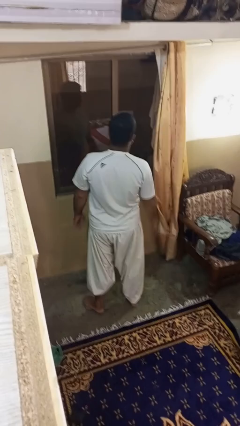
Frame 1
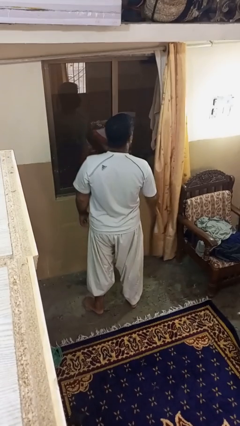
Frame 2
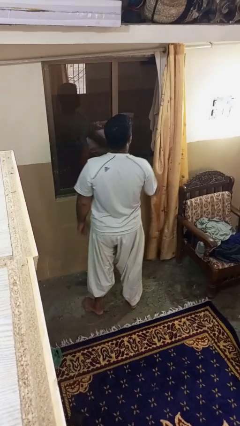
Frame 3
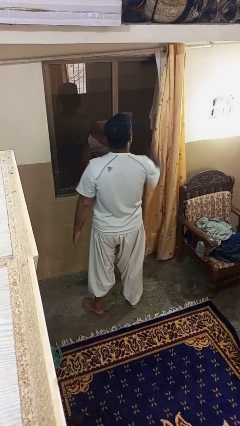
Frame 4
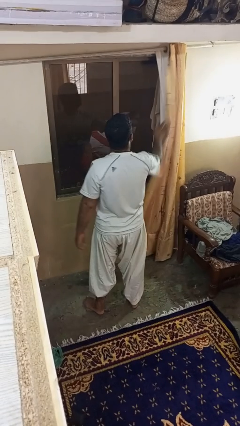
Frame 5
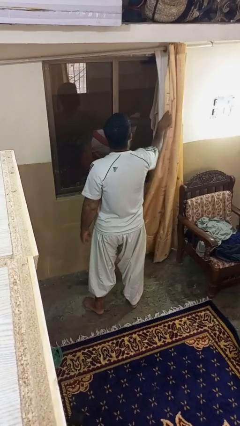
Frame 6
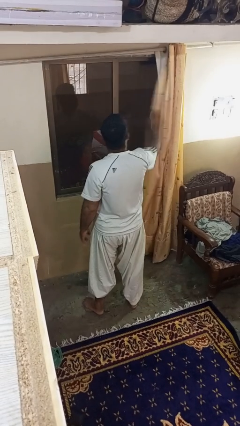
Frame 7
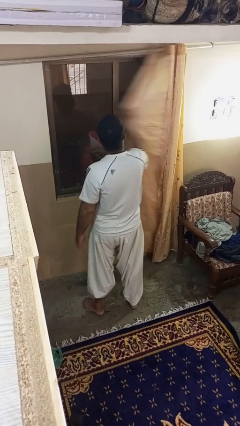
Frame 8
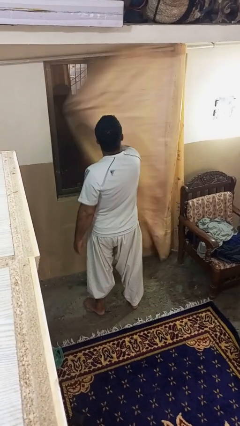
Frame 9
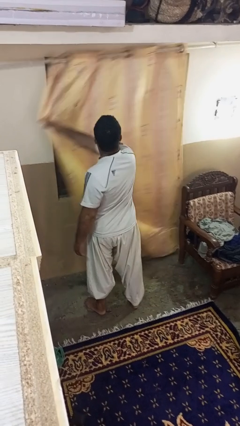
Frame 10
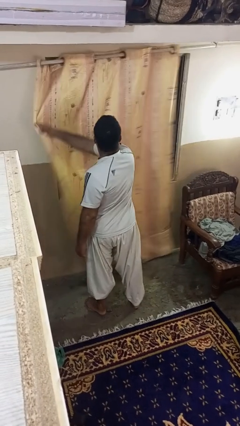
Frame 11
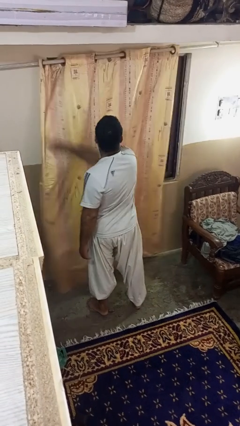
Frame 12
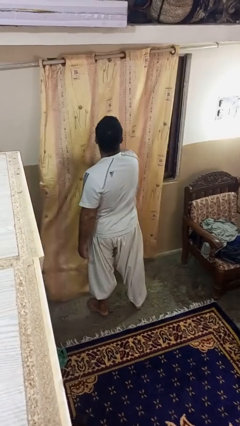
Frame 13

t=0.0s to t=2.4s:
person closes curtains

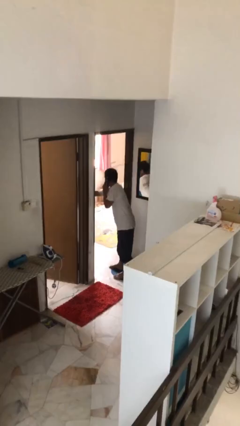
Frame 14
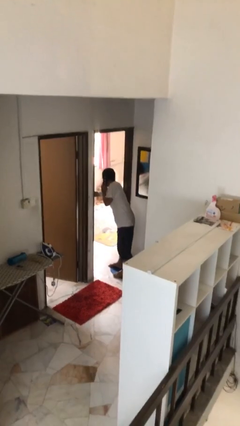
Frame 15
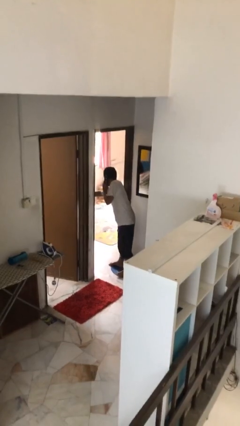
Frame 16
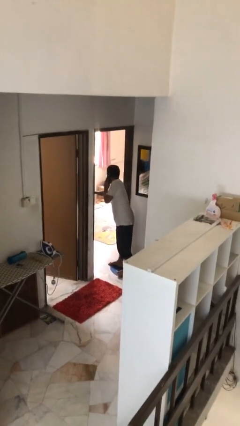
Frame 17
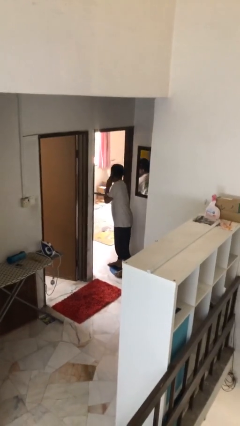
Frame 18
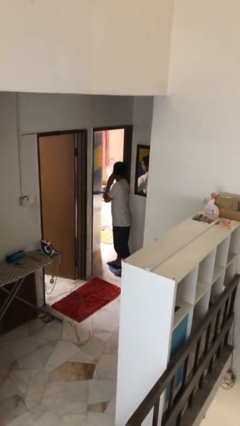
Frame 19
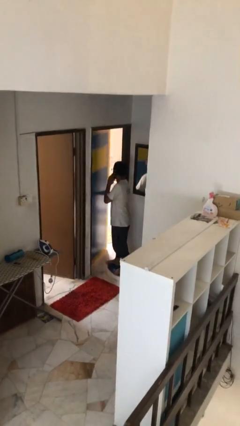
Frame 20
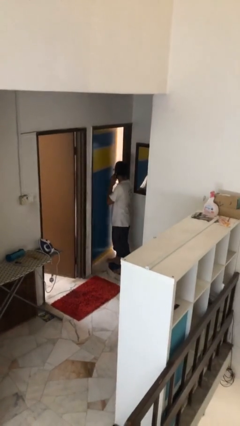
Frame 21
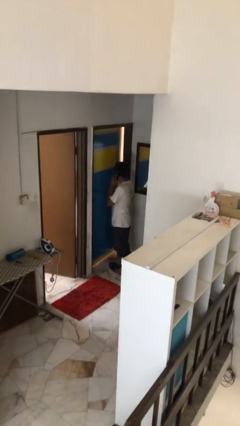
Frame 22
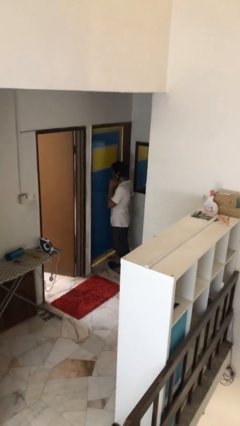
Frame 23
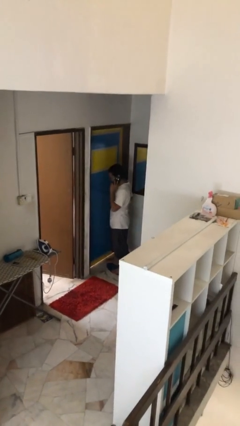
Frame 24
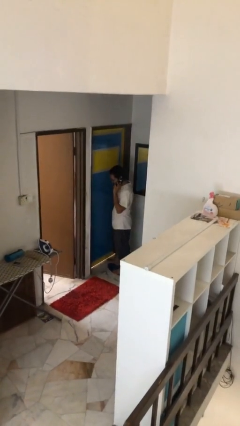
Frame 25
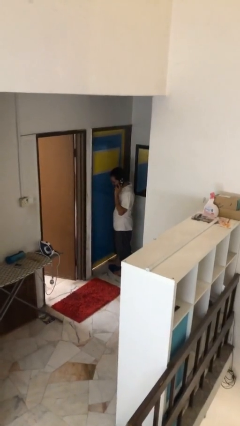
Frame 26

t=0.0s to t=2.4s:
person closes facility door

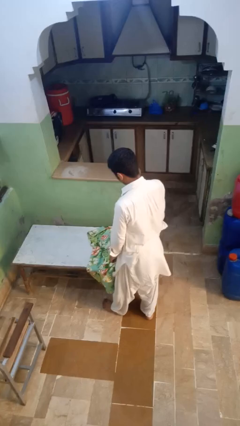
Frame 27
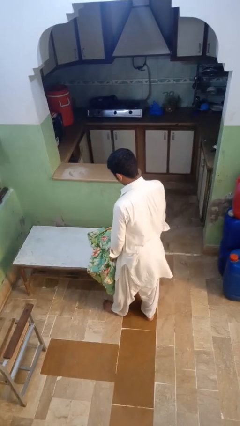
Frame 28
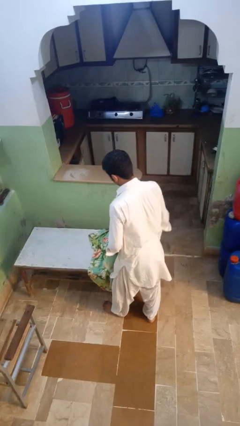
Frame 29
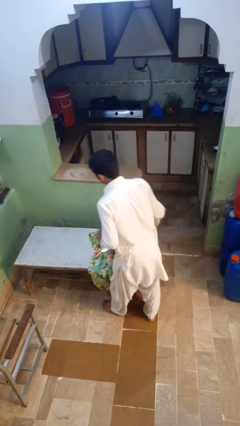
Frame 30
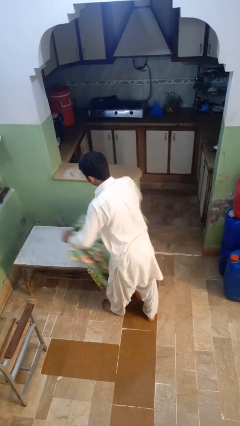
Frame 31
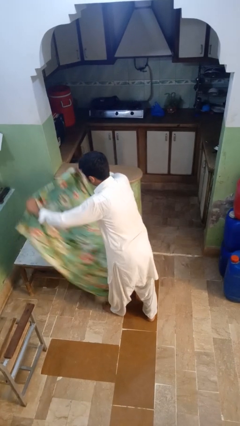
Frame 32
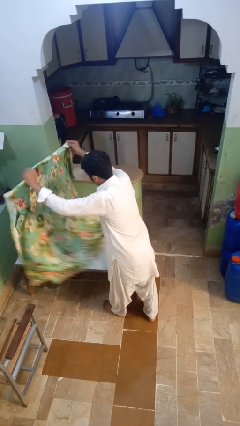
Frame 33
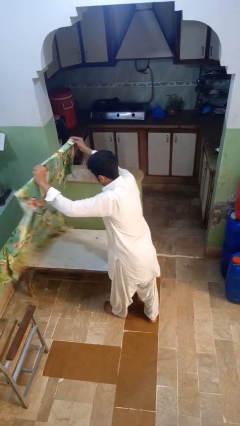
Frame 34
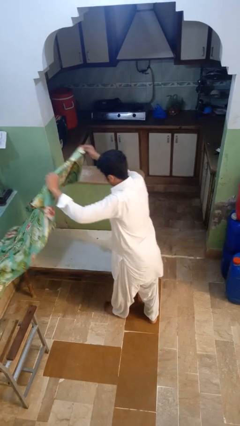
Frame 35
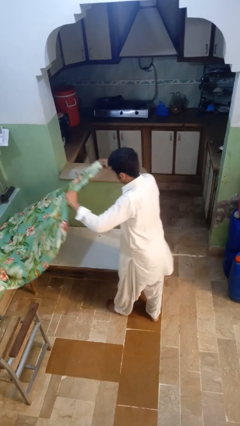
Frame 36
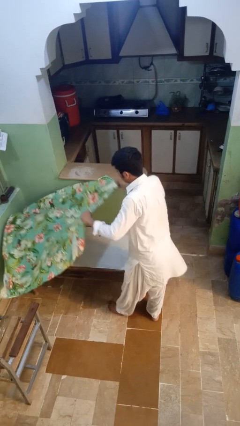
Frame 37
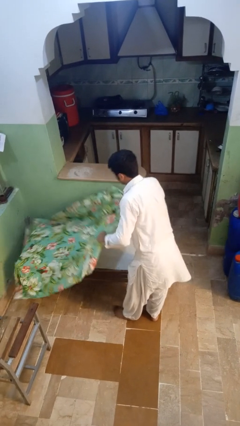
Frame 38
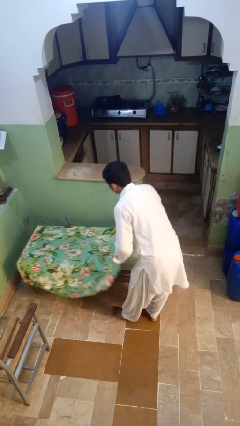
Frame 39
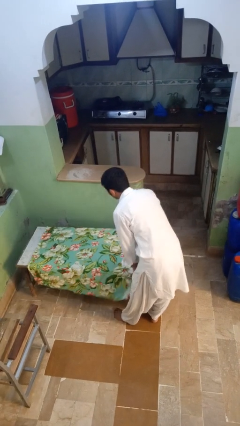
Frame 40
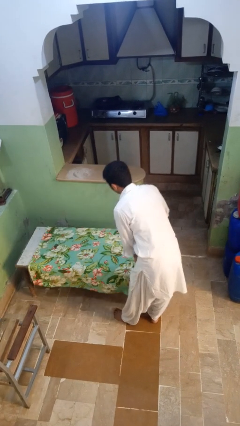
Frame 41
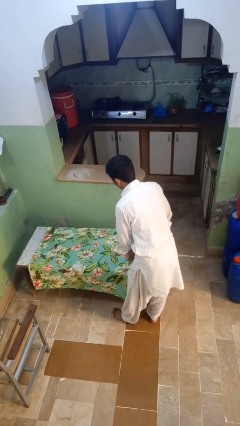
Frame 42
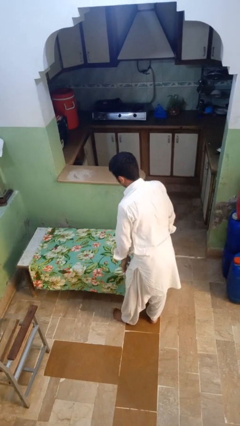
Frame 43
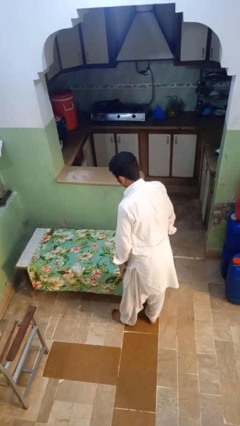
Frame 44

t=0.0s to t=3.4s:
person spreads tablecloth

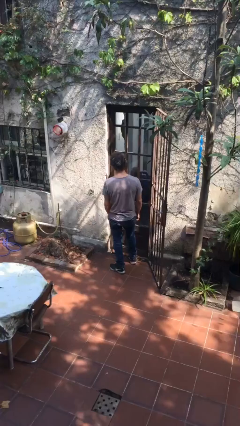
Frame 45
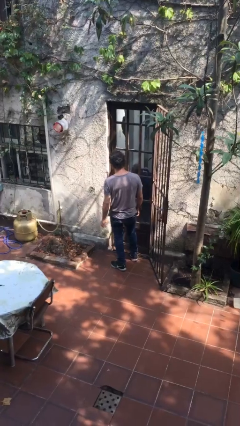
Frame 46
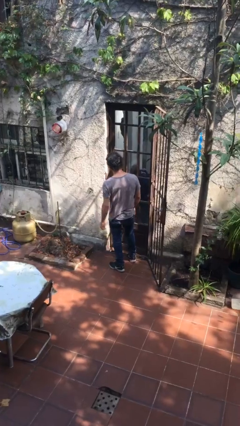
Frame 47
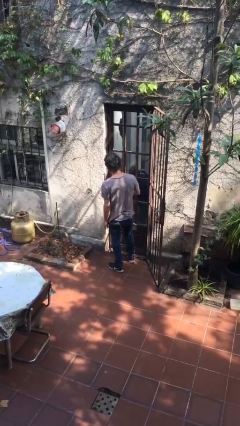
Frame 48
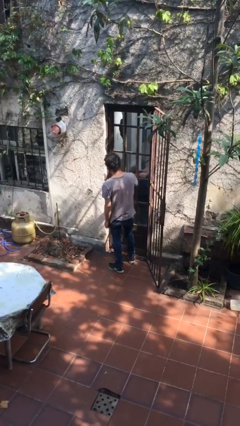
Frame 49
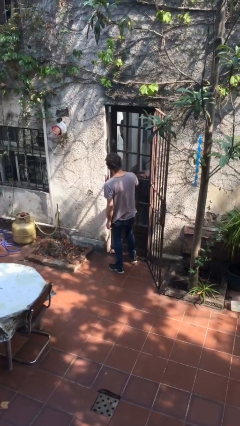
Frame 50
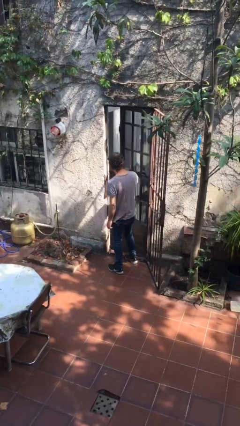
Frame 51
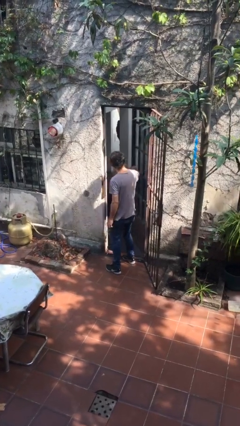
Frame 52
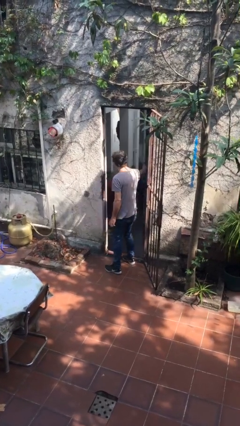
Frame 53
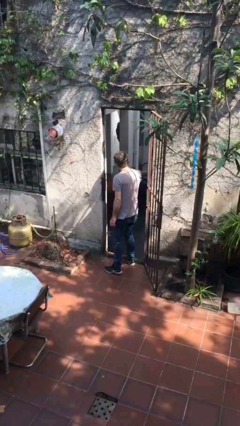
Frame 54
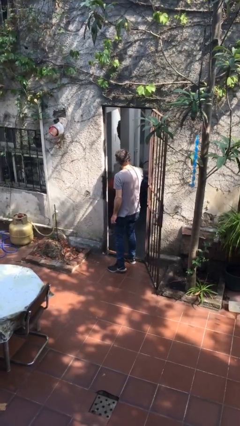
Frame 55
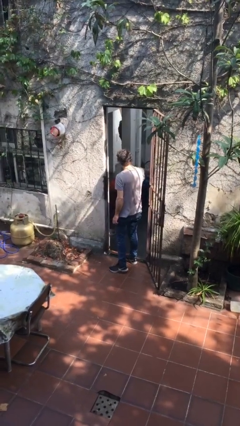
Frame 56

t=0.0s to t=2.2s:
person opens facility door

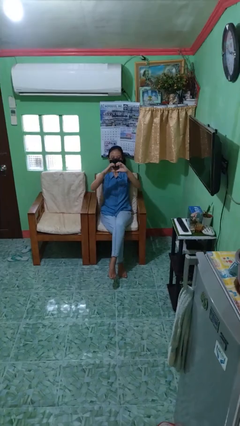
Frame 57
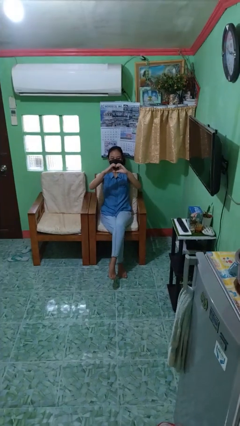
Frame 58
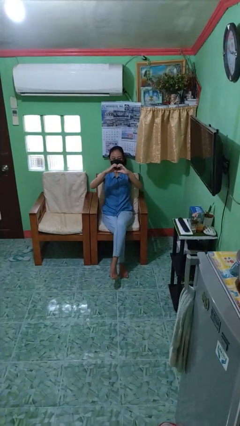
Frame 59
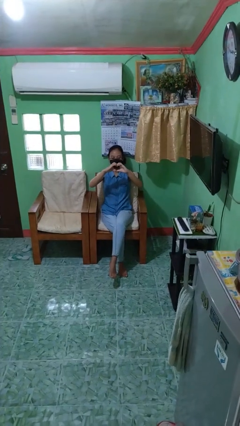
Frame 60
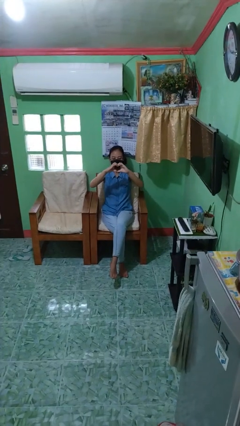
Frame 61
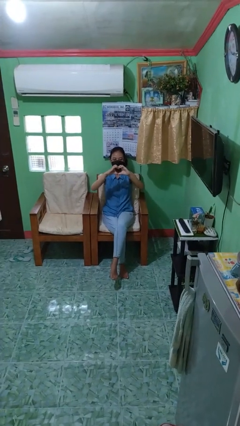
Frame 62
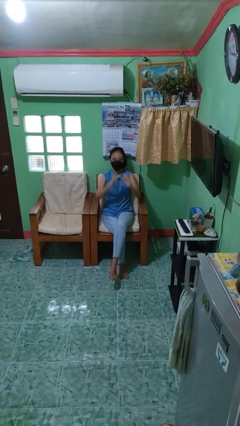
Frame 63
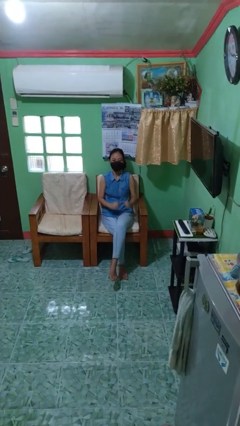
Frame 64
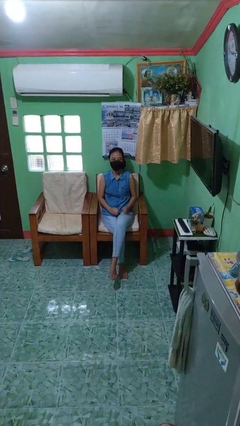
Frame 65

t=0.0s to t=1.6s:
person gestures heart

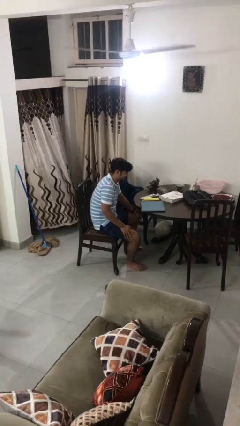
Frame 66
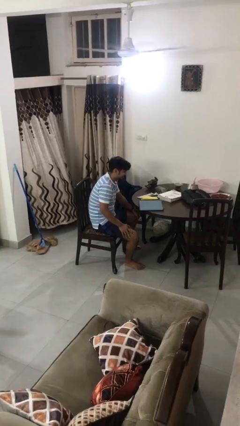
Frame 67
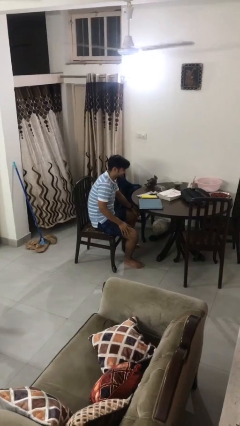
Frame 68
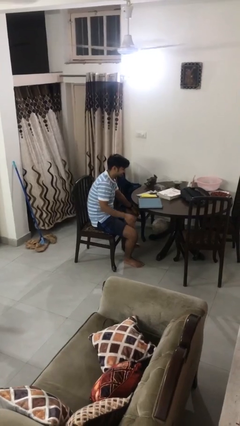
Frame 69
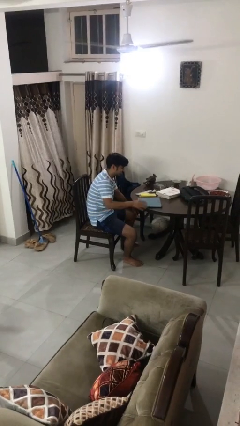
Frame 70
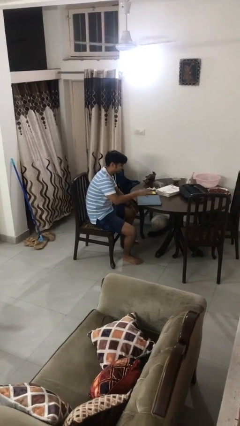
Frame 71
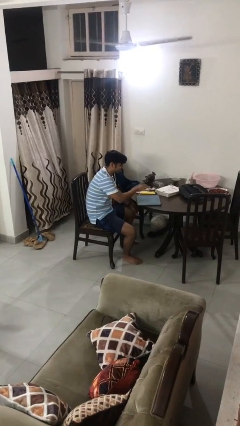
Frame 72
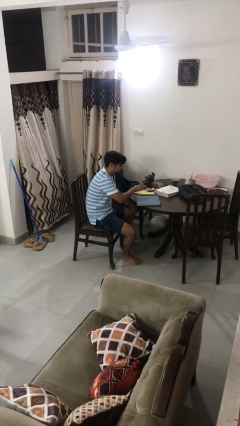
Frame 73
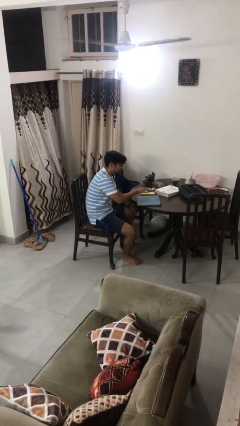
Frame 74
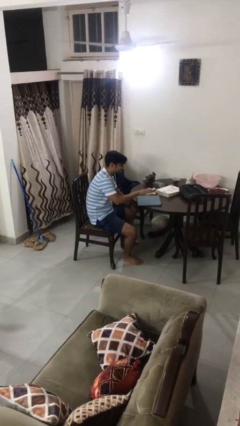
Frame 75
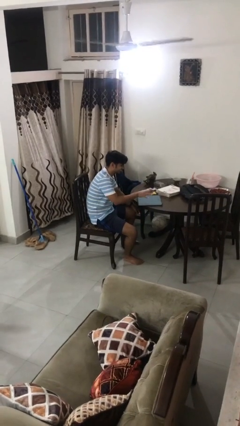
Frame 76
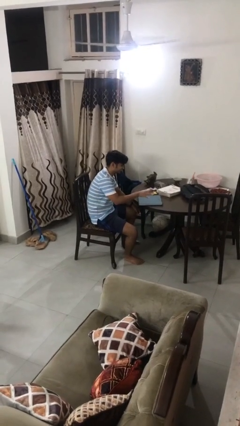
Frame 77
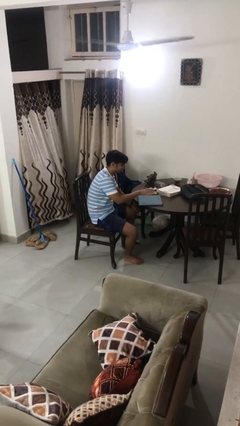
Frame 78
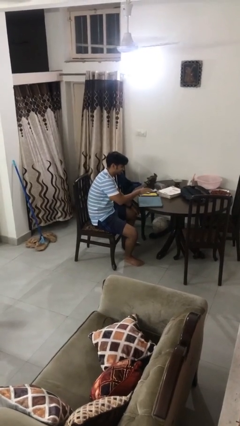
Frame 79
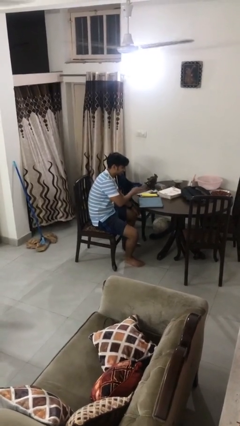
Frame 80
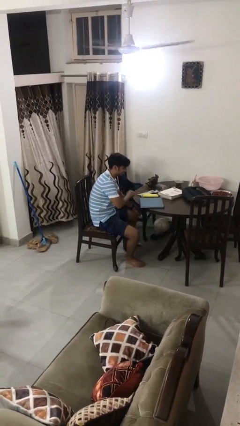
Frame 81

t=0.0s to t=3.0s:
person waves hand over object

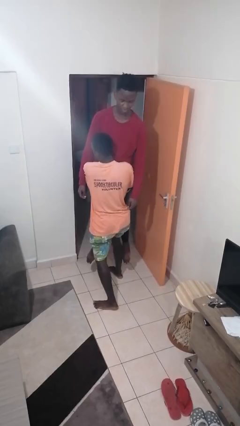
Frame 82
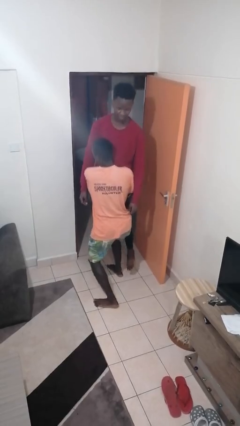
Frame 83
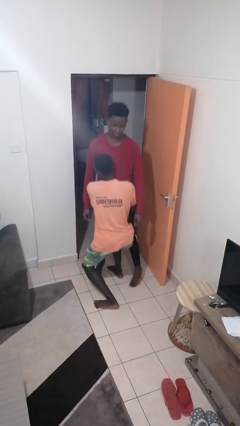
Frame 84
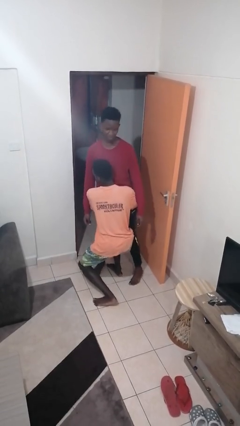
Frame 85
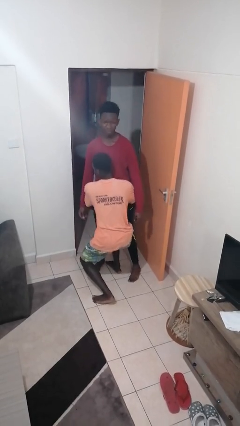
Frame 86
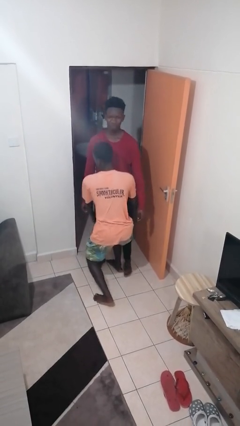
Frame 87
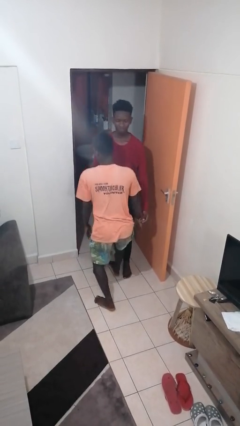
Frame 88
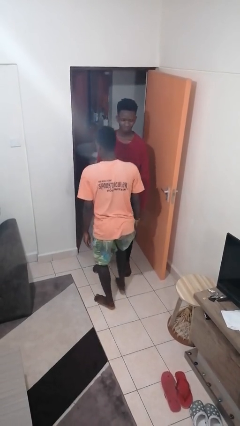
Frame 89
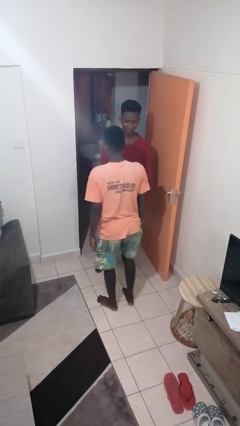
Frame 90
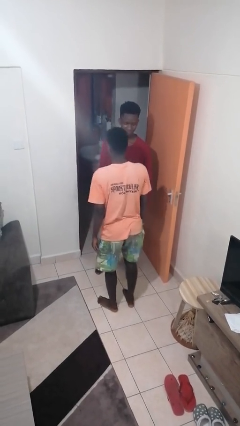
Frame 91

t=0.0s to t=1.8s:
person puts down person

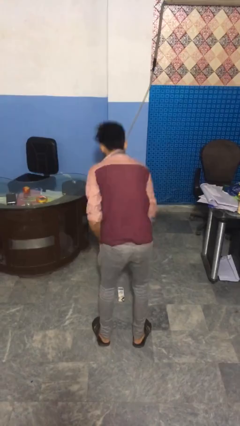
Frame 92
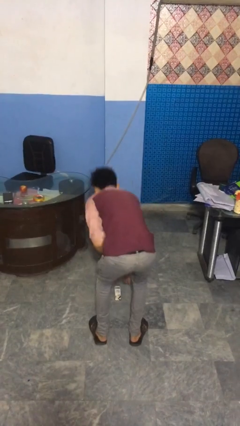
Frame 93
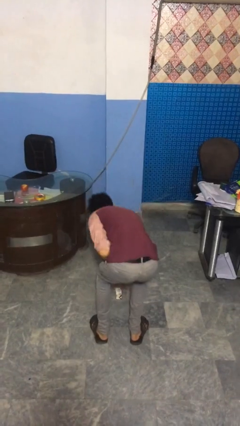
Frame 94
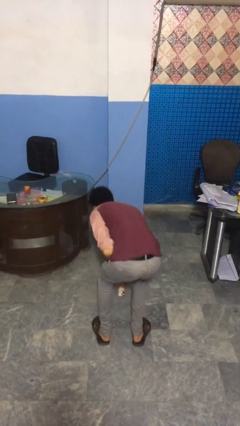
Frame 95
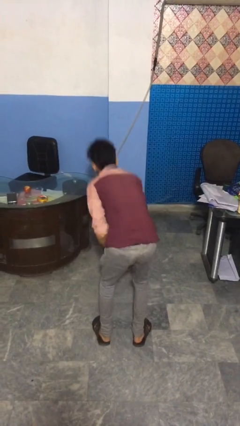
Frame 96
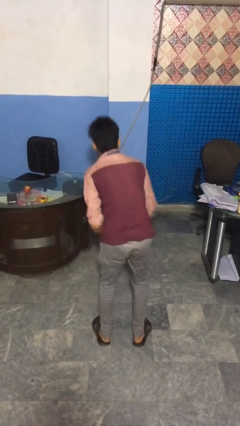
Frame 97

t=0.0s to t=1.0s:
person picks up object from floor
